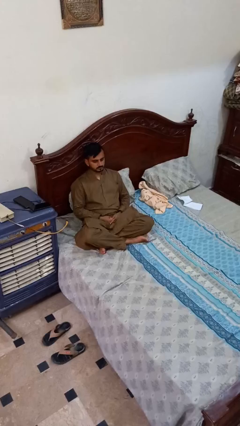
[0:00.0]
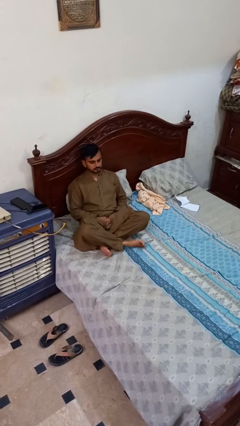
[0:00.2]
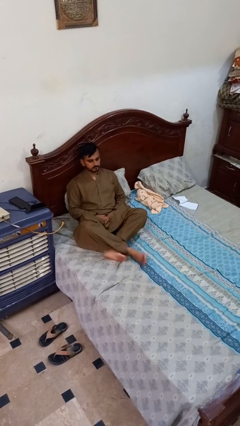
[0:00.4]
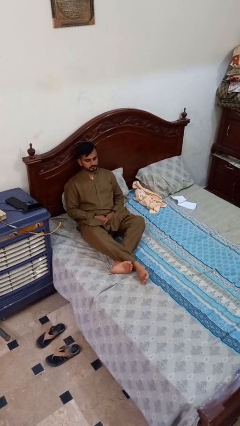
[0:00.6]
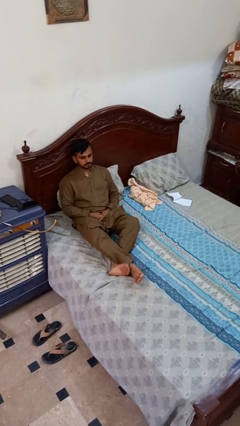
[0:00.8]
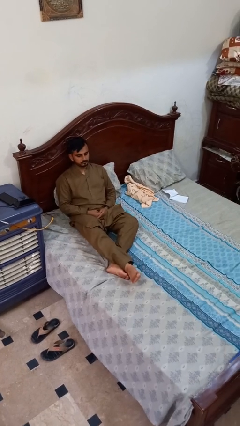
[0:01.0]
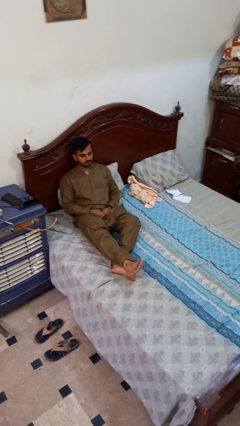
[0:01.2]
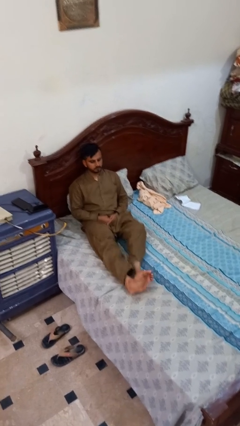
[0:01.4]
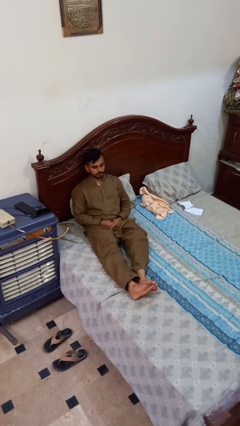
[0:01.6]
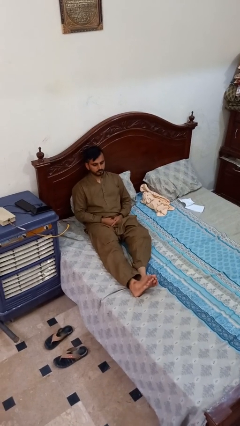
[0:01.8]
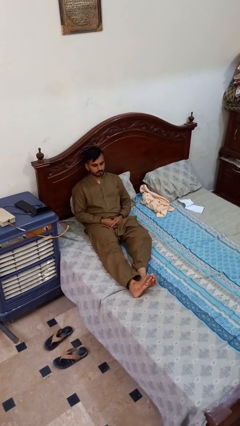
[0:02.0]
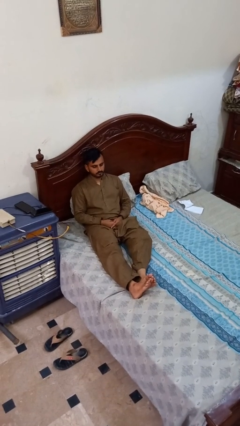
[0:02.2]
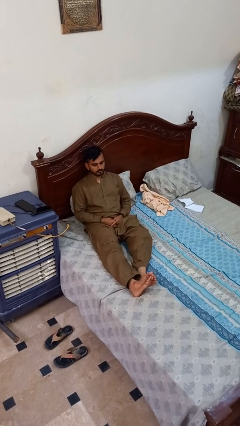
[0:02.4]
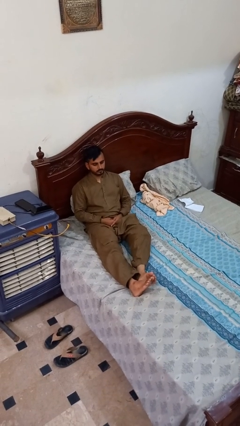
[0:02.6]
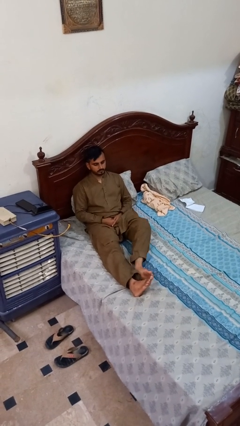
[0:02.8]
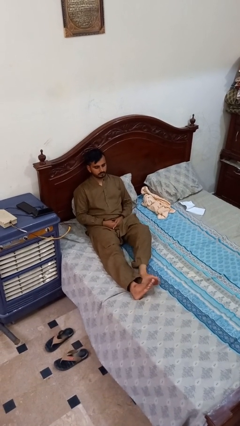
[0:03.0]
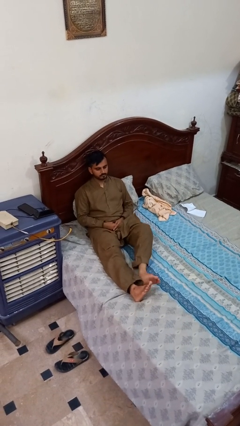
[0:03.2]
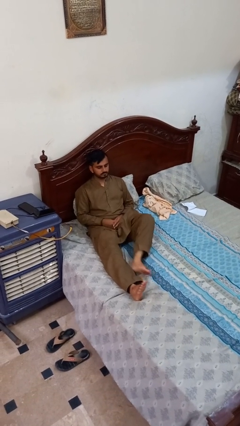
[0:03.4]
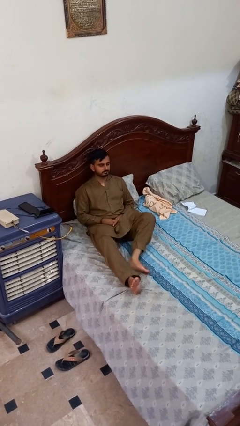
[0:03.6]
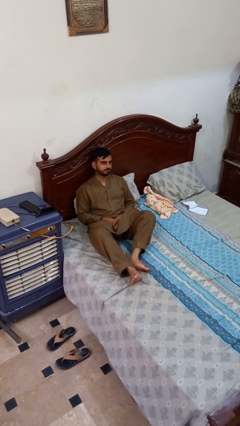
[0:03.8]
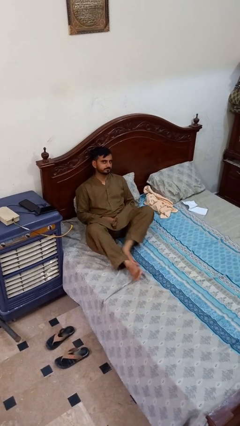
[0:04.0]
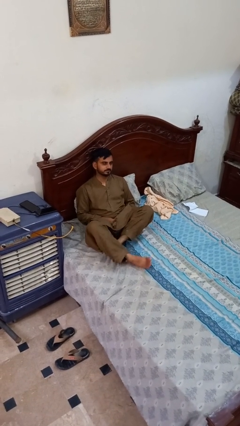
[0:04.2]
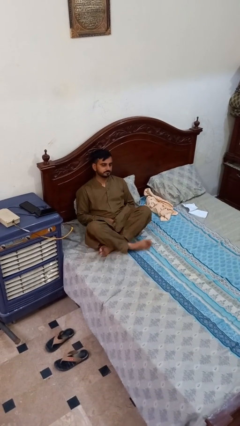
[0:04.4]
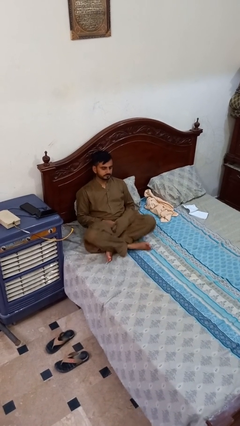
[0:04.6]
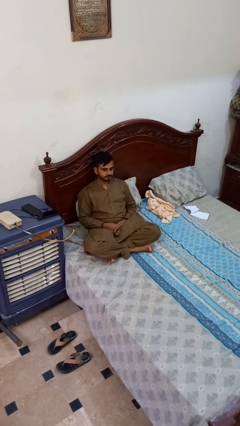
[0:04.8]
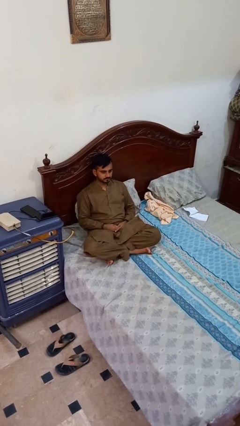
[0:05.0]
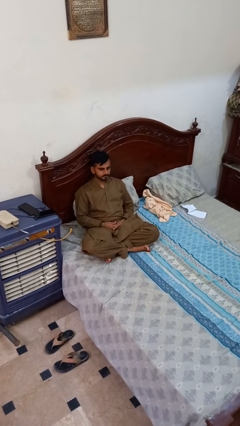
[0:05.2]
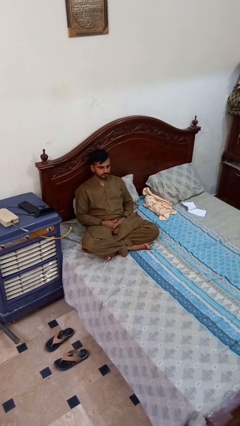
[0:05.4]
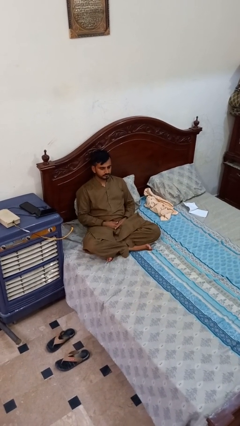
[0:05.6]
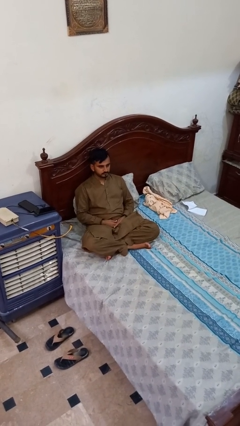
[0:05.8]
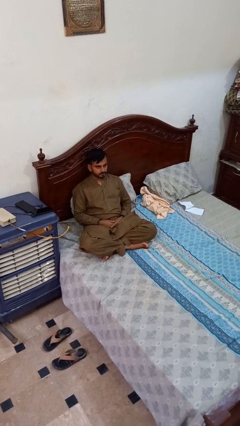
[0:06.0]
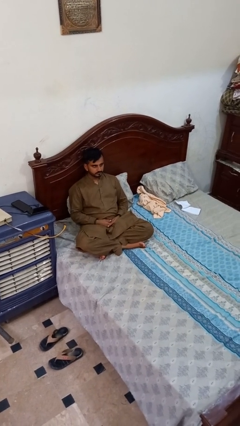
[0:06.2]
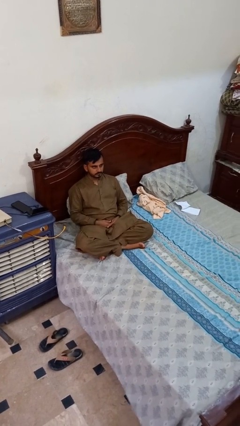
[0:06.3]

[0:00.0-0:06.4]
person crosses legs

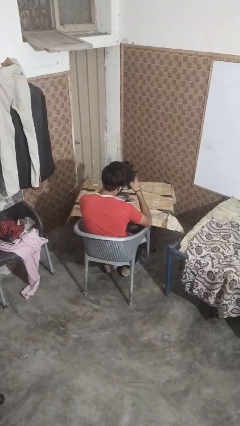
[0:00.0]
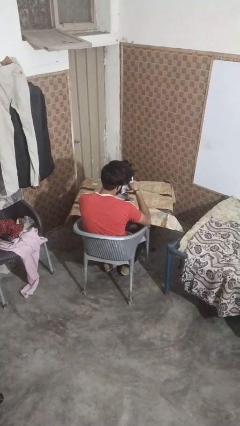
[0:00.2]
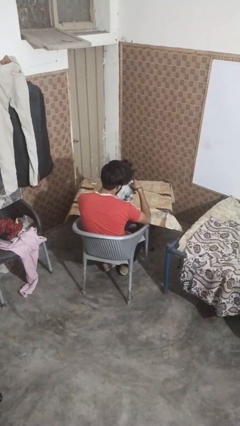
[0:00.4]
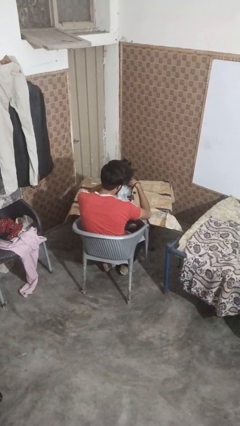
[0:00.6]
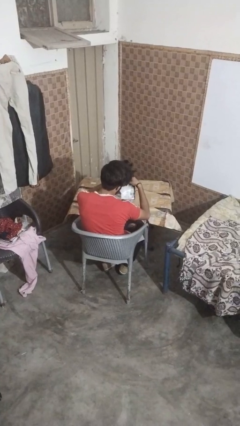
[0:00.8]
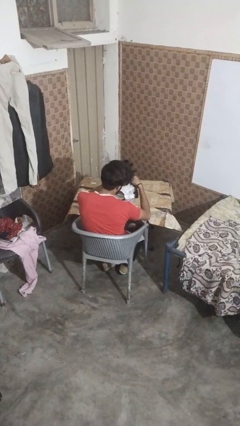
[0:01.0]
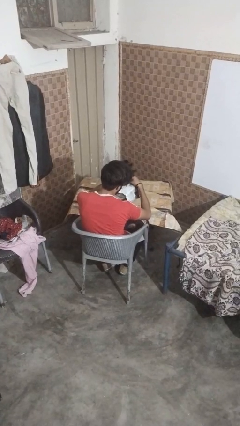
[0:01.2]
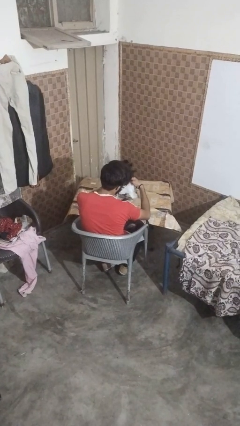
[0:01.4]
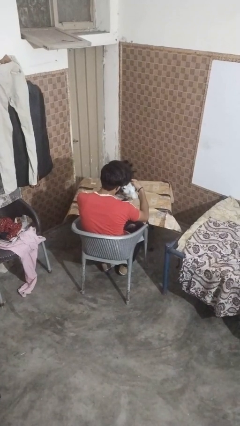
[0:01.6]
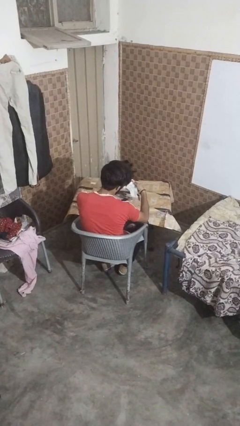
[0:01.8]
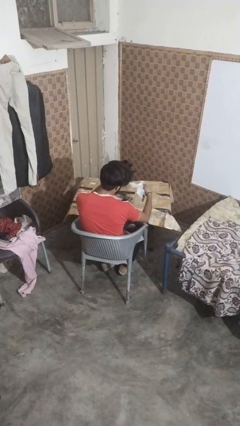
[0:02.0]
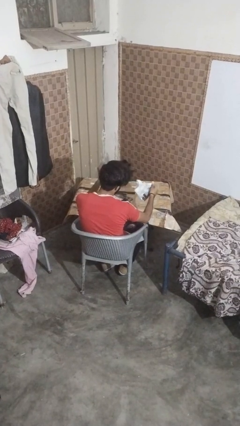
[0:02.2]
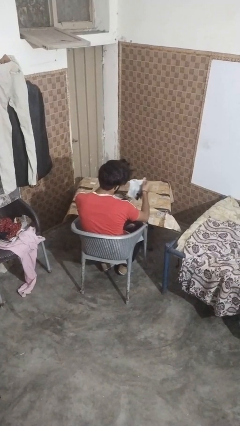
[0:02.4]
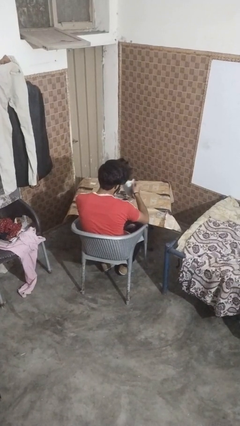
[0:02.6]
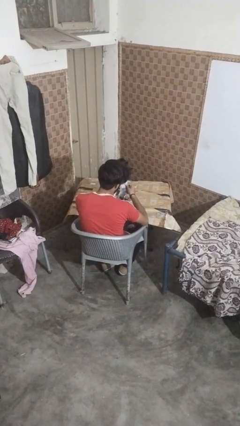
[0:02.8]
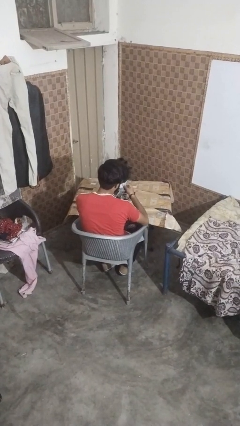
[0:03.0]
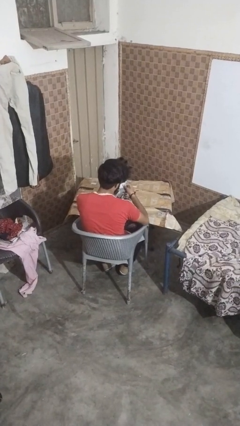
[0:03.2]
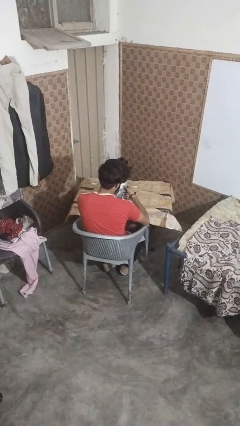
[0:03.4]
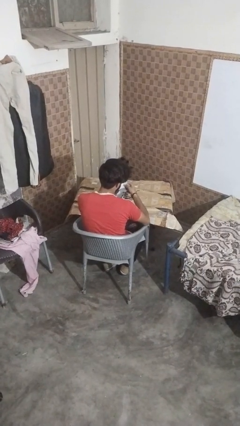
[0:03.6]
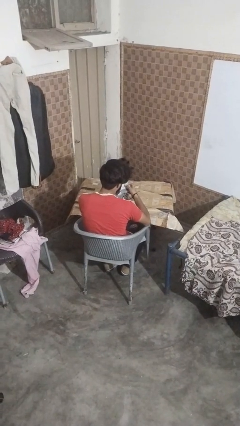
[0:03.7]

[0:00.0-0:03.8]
person tears paper

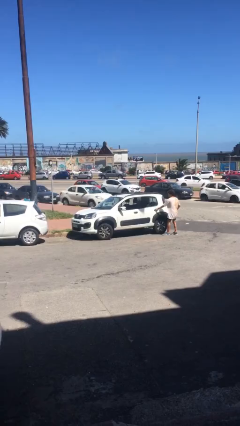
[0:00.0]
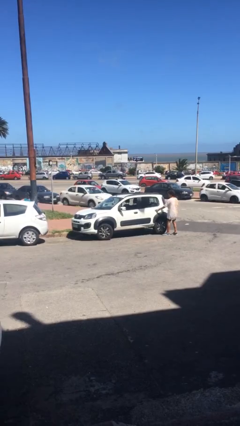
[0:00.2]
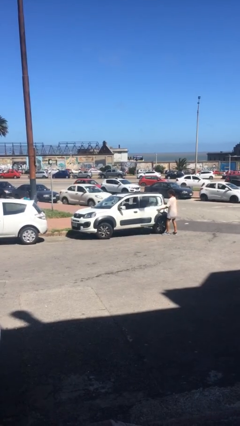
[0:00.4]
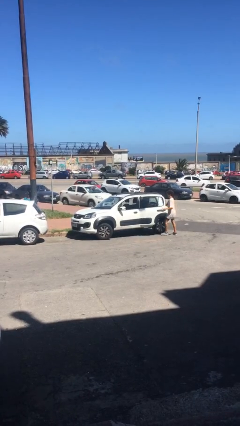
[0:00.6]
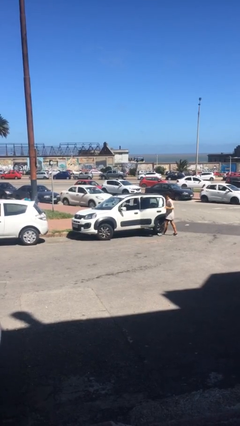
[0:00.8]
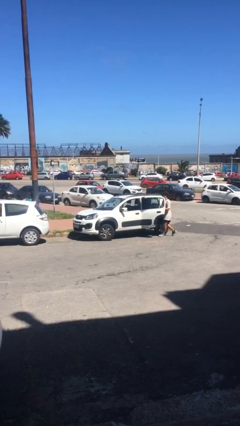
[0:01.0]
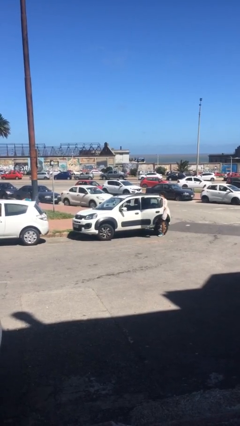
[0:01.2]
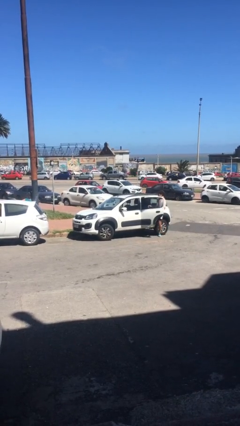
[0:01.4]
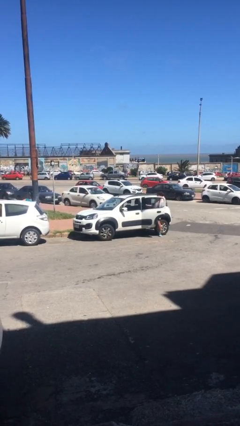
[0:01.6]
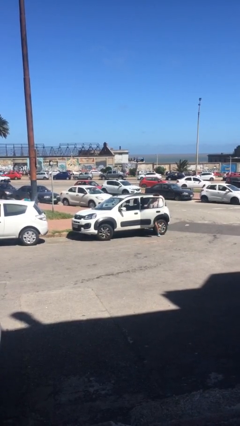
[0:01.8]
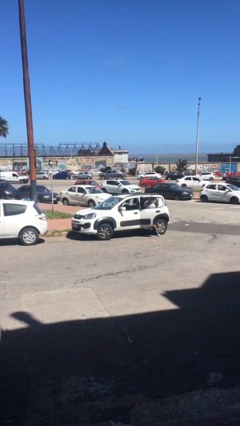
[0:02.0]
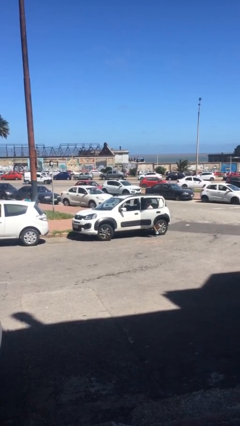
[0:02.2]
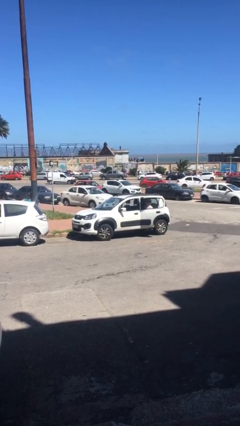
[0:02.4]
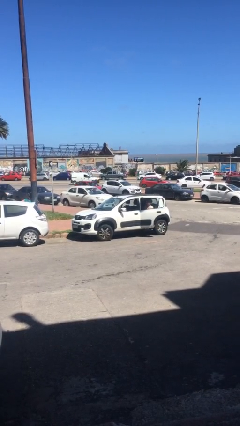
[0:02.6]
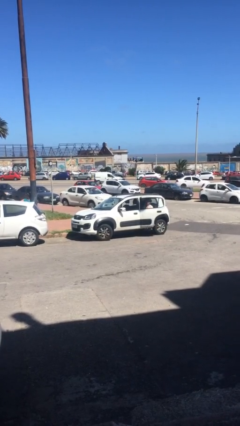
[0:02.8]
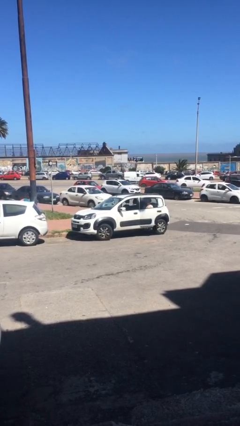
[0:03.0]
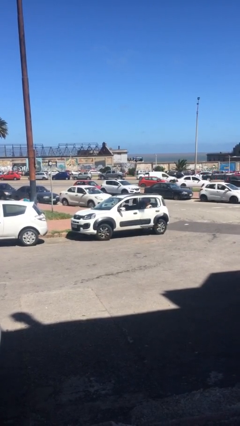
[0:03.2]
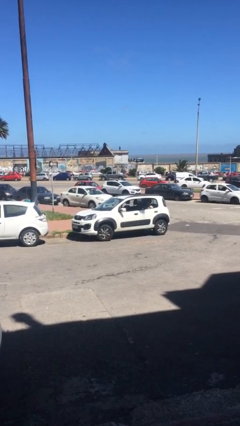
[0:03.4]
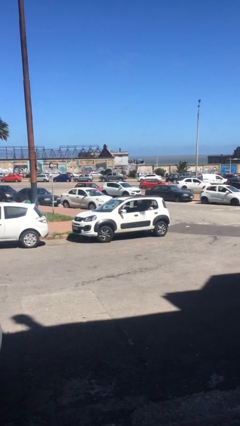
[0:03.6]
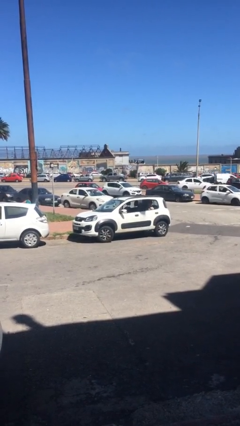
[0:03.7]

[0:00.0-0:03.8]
car picks up person

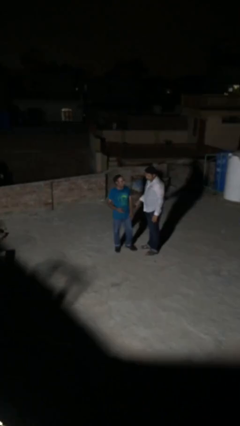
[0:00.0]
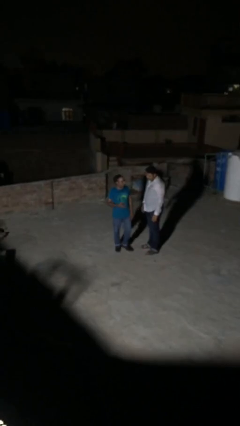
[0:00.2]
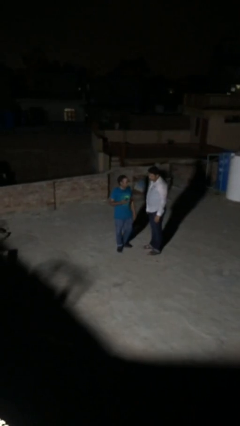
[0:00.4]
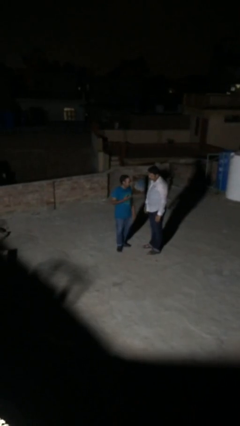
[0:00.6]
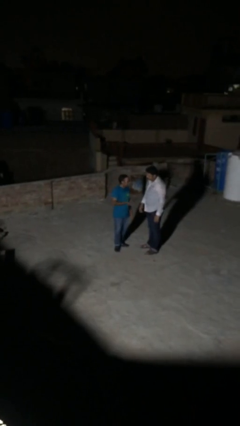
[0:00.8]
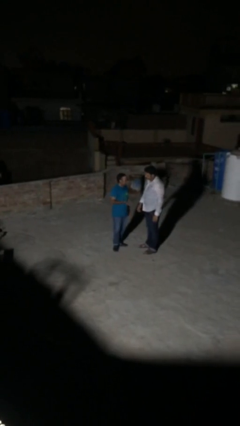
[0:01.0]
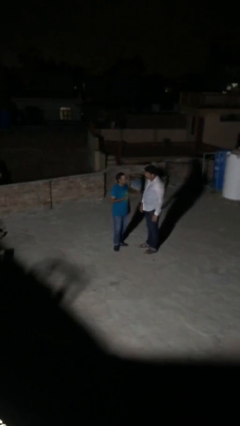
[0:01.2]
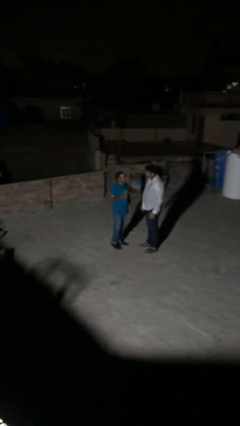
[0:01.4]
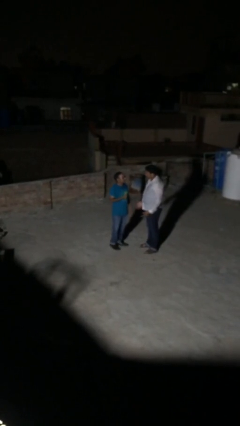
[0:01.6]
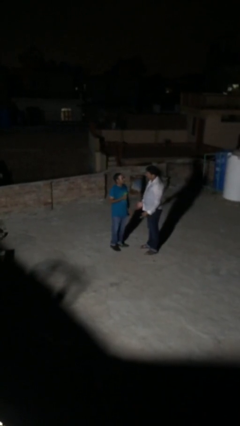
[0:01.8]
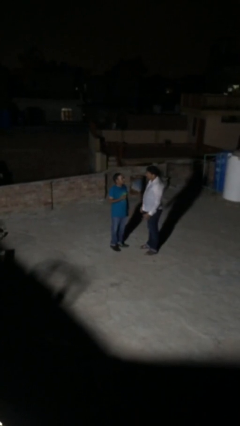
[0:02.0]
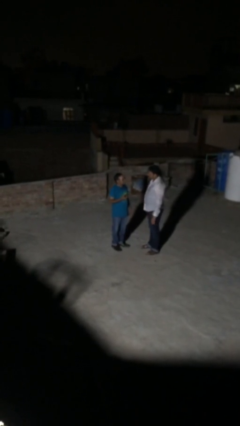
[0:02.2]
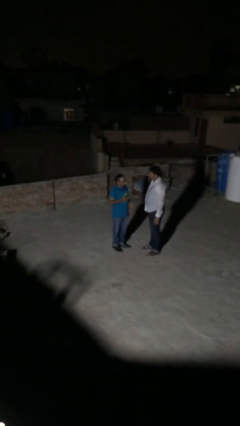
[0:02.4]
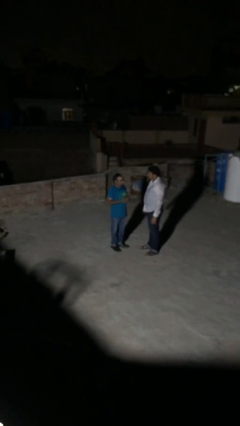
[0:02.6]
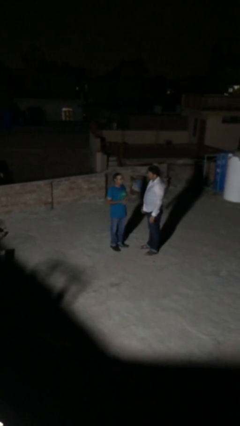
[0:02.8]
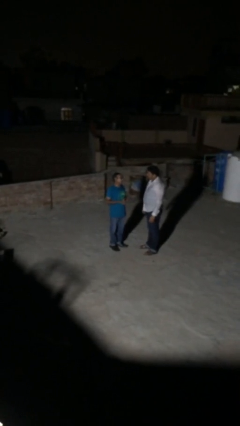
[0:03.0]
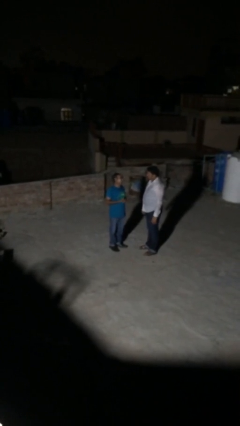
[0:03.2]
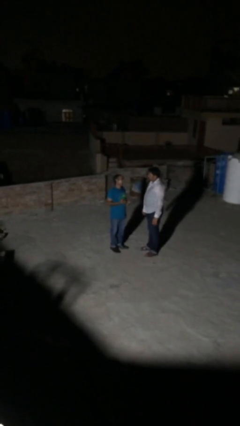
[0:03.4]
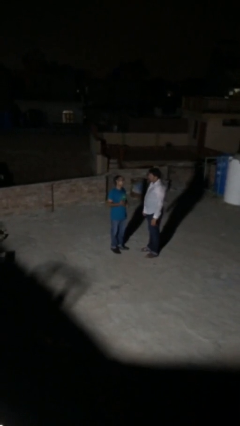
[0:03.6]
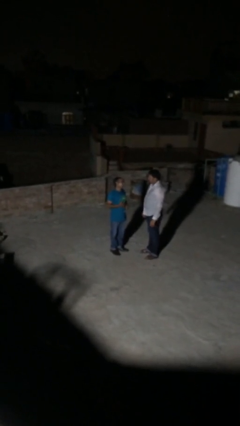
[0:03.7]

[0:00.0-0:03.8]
person talks to person

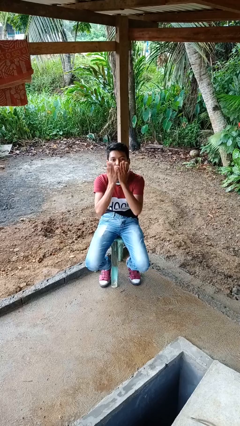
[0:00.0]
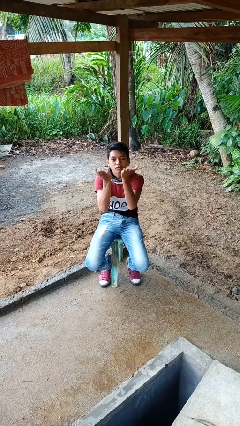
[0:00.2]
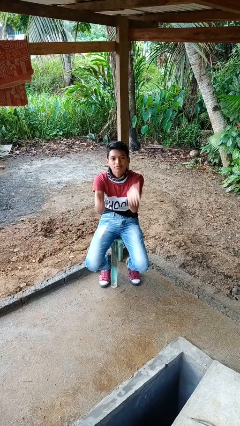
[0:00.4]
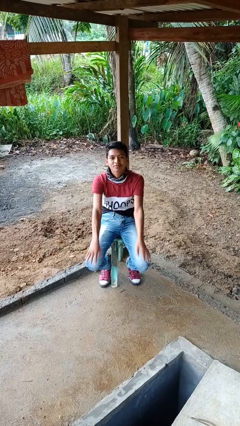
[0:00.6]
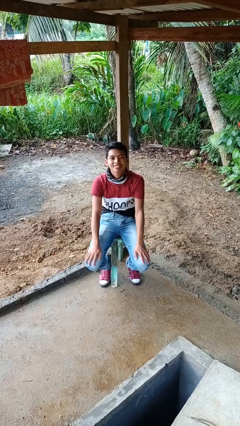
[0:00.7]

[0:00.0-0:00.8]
person gestures blow kiss
